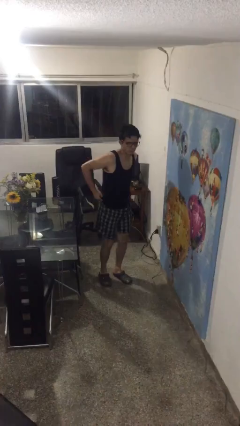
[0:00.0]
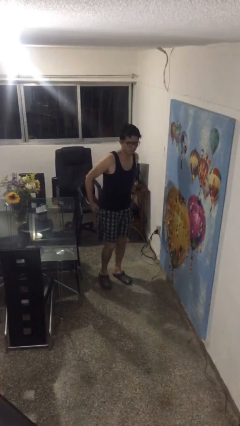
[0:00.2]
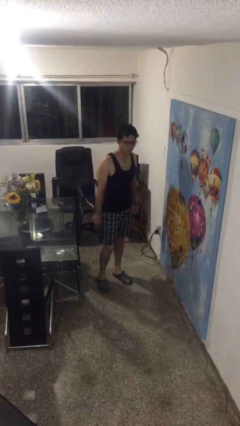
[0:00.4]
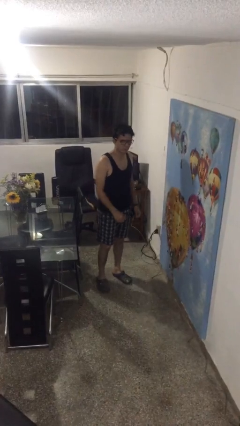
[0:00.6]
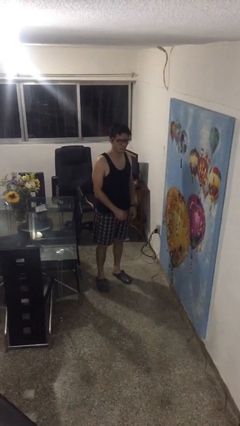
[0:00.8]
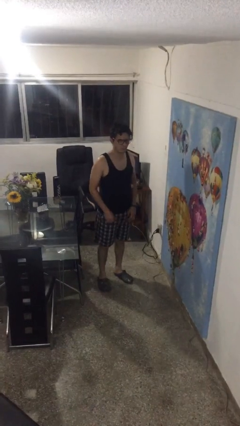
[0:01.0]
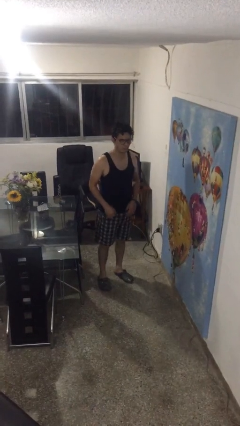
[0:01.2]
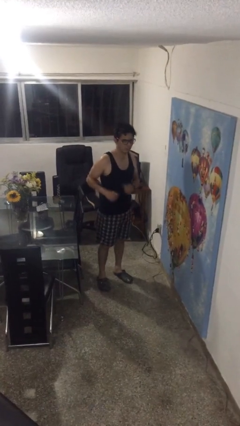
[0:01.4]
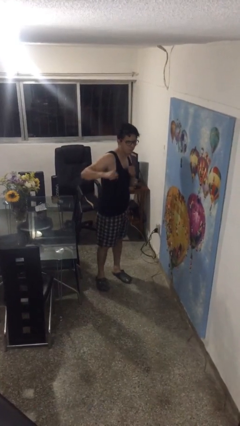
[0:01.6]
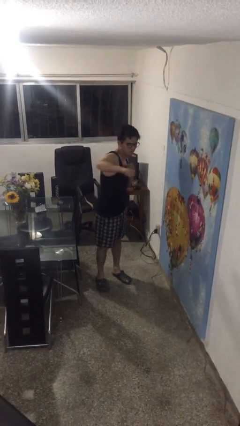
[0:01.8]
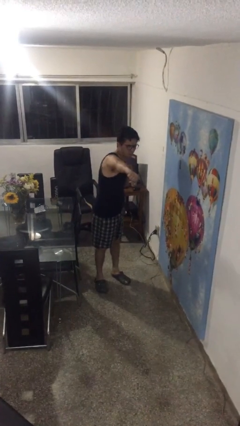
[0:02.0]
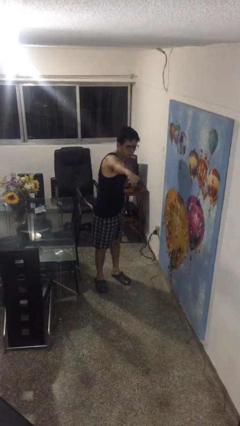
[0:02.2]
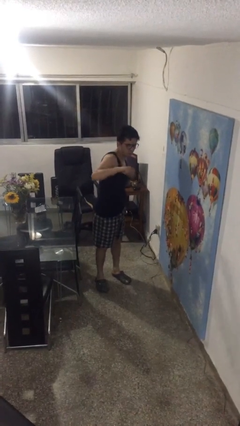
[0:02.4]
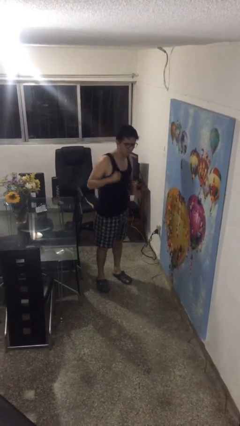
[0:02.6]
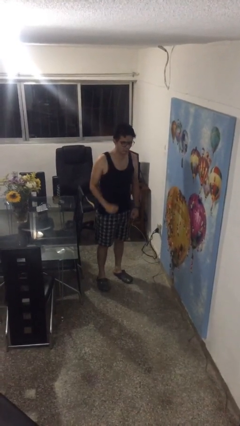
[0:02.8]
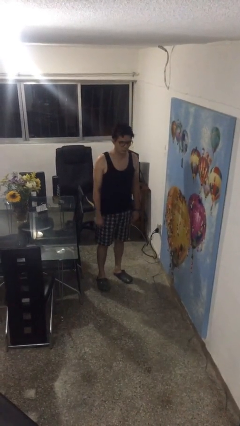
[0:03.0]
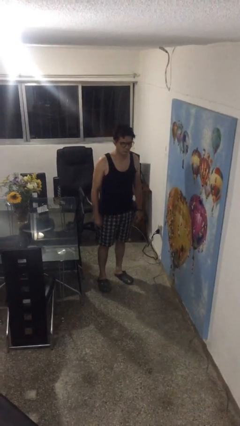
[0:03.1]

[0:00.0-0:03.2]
person karate chop

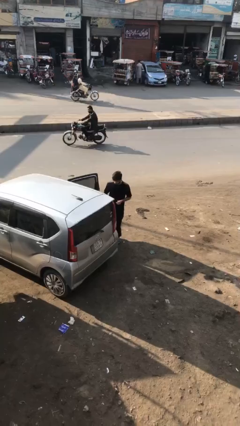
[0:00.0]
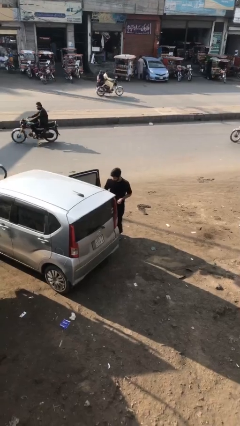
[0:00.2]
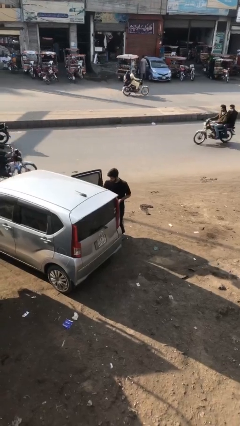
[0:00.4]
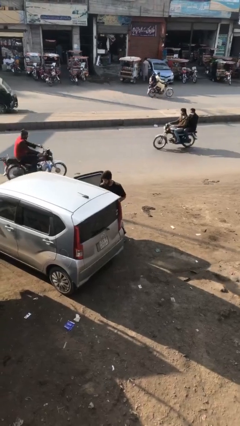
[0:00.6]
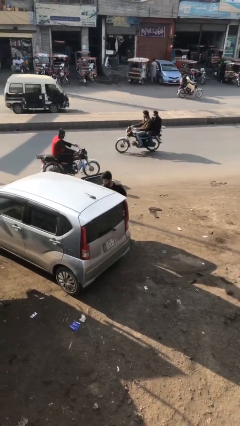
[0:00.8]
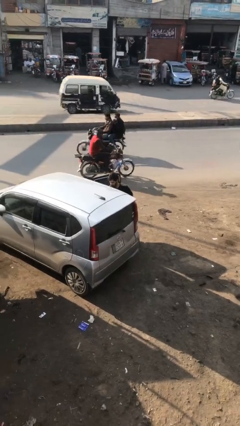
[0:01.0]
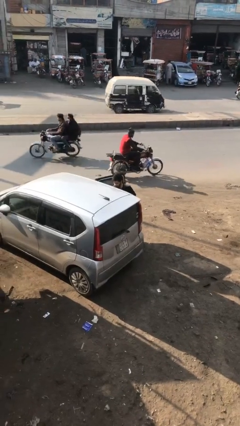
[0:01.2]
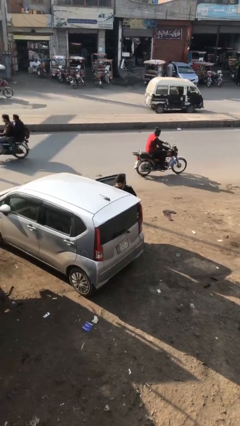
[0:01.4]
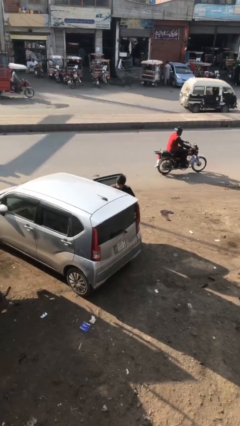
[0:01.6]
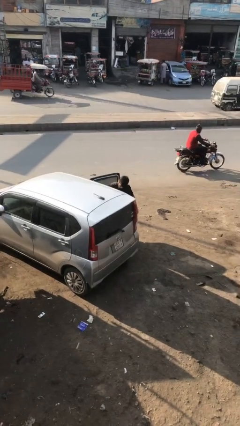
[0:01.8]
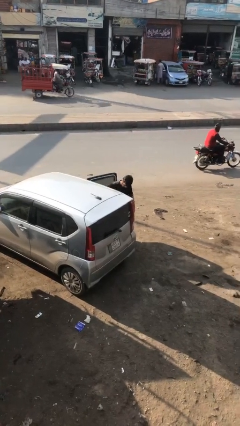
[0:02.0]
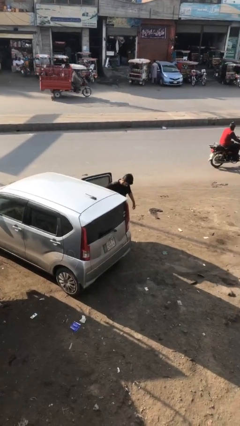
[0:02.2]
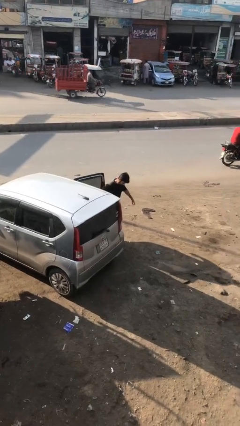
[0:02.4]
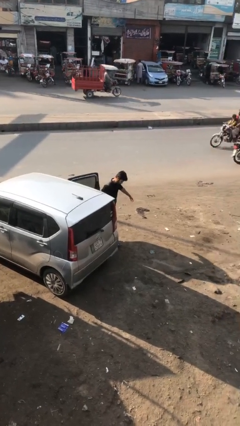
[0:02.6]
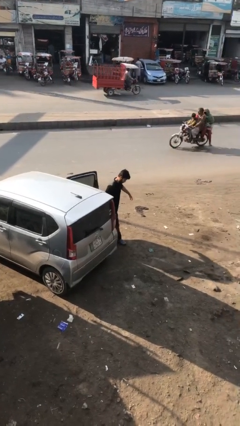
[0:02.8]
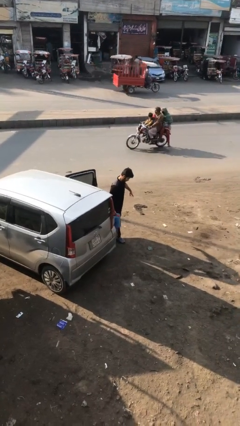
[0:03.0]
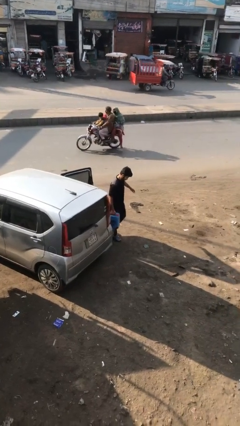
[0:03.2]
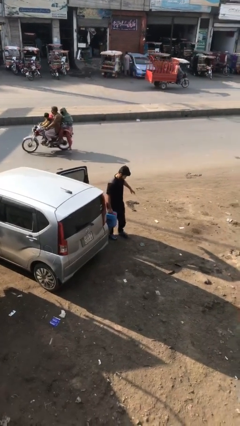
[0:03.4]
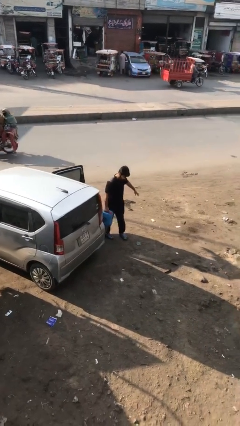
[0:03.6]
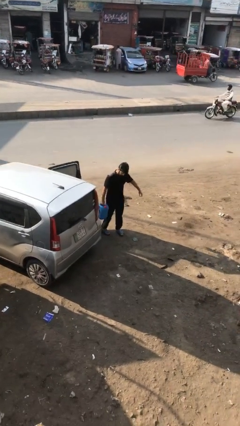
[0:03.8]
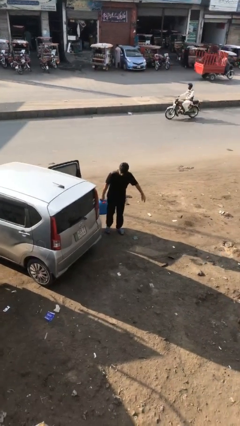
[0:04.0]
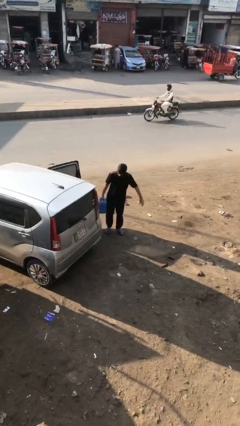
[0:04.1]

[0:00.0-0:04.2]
person unloads car

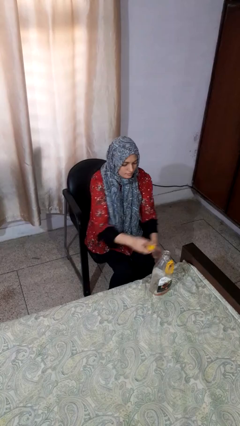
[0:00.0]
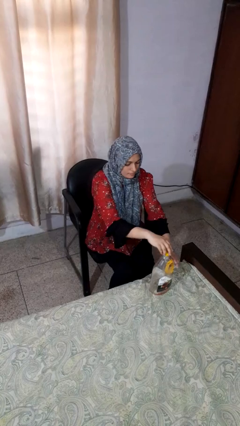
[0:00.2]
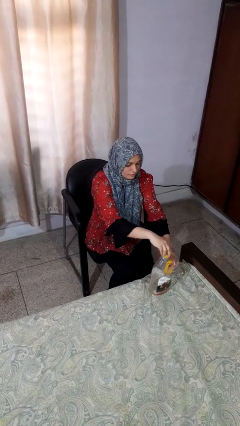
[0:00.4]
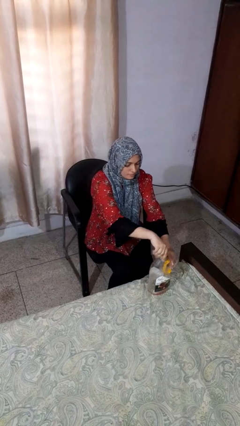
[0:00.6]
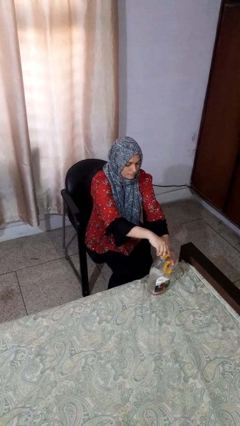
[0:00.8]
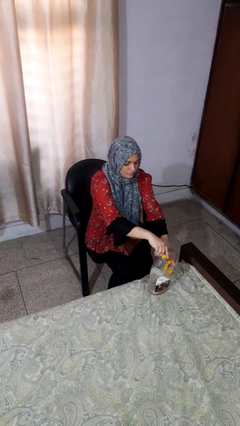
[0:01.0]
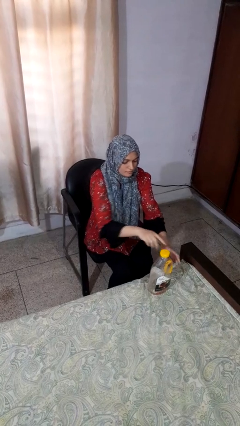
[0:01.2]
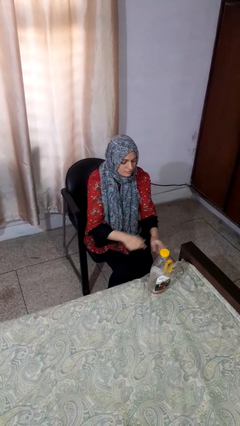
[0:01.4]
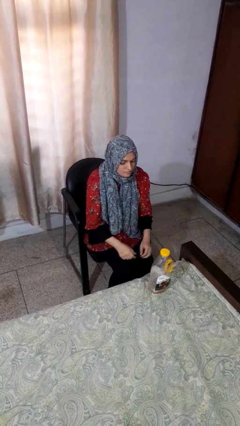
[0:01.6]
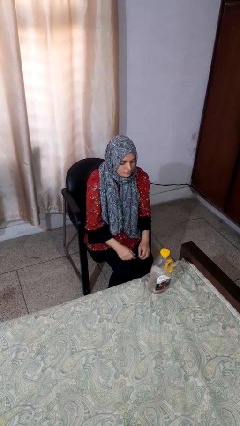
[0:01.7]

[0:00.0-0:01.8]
person screws lid to bottle

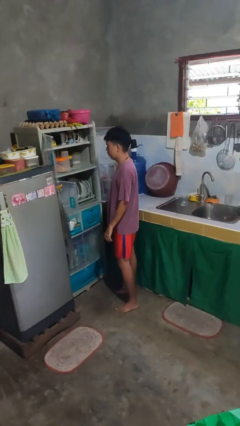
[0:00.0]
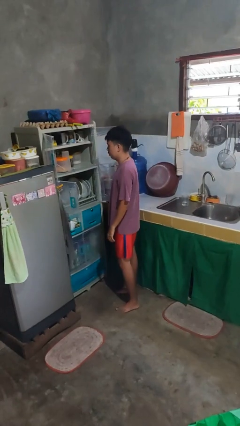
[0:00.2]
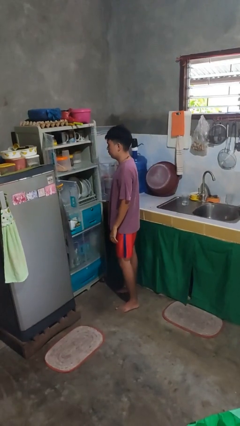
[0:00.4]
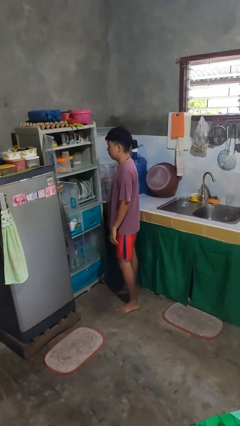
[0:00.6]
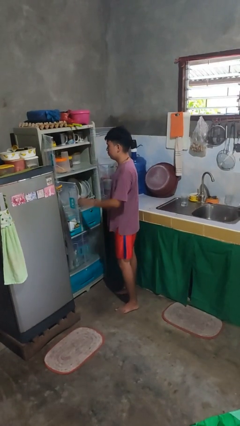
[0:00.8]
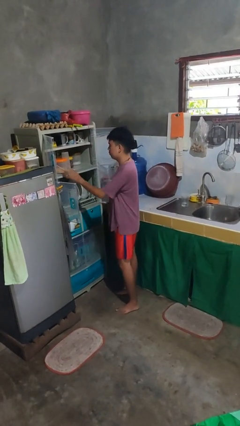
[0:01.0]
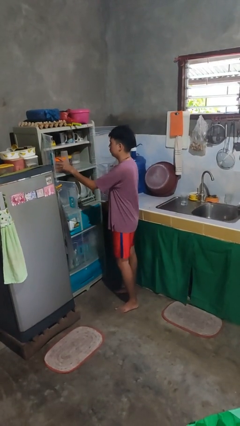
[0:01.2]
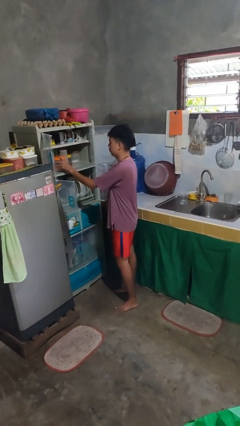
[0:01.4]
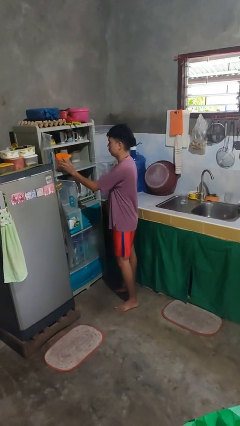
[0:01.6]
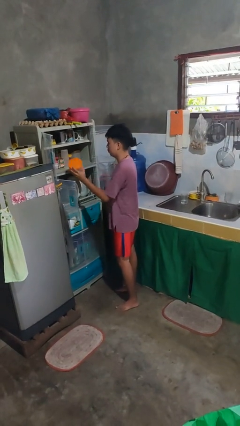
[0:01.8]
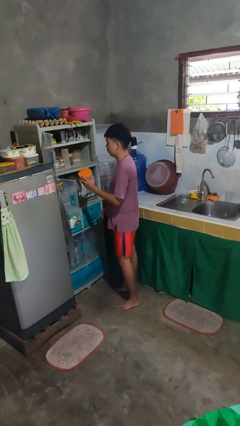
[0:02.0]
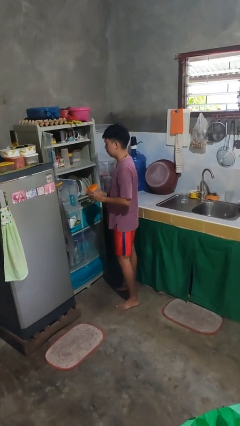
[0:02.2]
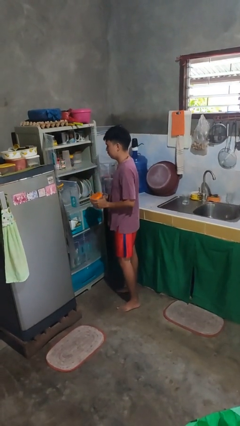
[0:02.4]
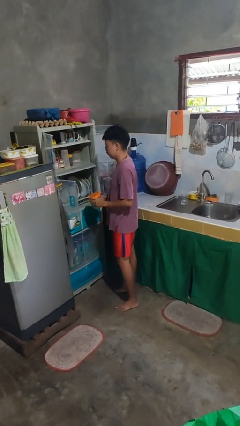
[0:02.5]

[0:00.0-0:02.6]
person takes object from cabinet

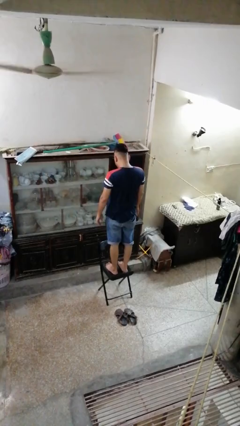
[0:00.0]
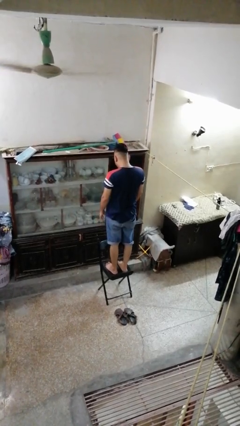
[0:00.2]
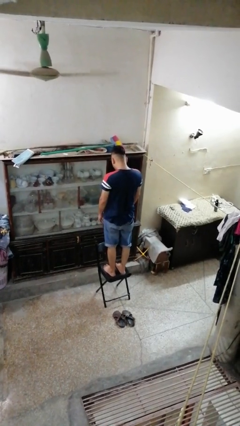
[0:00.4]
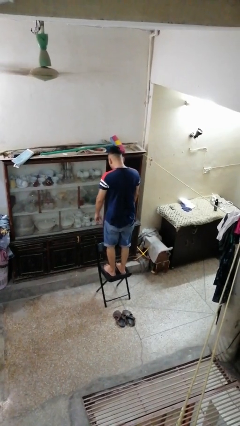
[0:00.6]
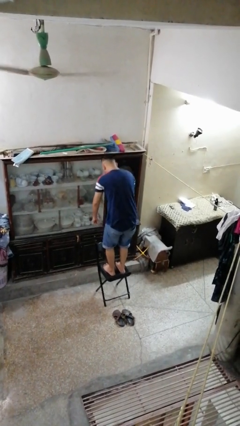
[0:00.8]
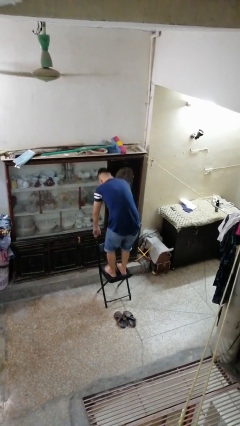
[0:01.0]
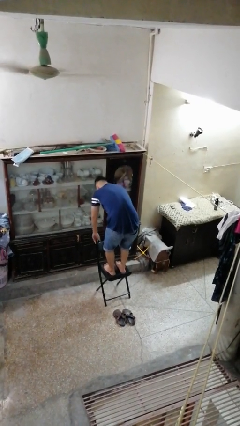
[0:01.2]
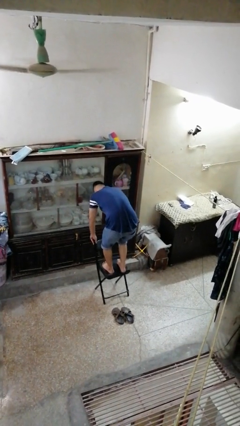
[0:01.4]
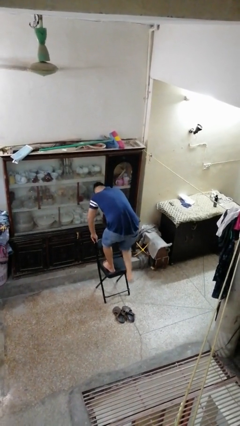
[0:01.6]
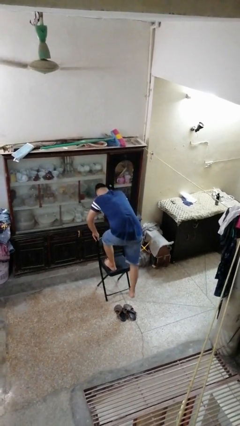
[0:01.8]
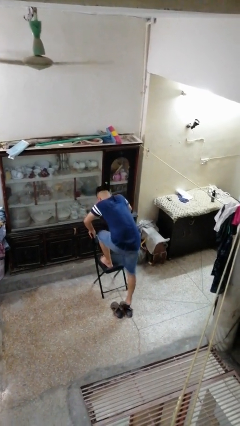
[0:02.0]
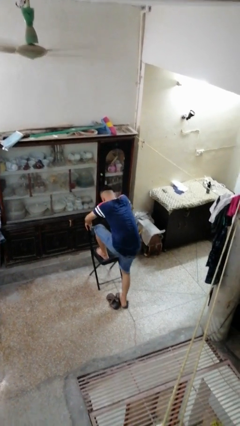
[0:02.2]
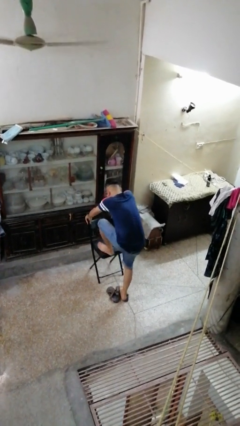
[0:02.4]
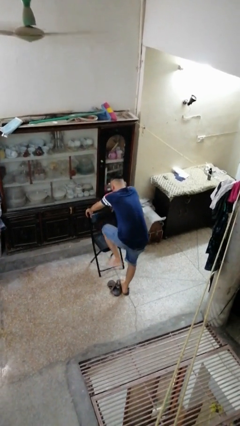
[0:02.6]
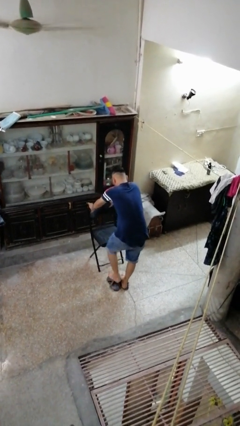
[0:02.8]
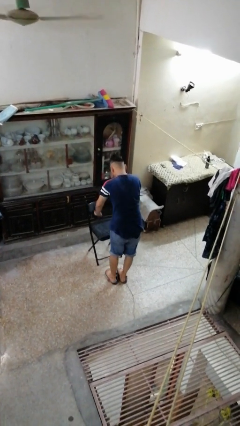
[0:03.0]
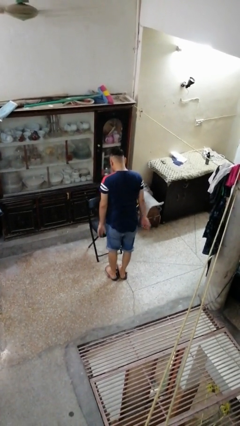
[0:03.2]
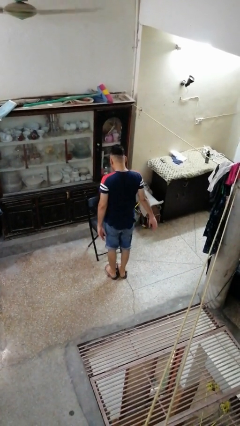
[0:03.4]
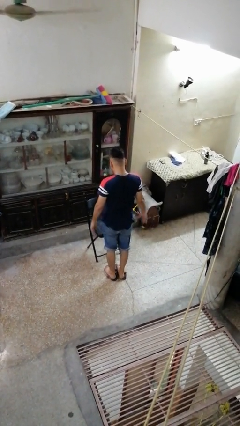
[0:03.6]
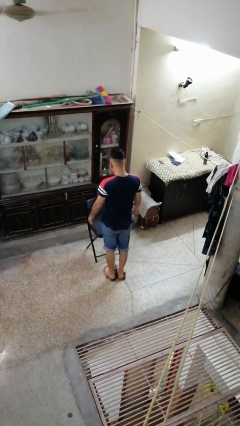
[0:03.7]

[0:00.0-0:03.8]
person climbs off chair

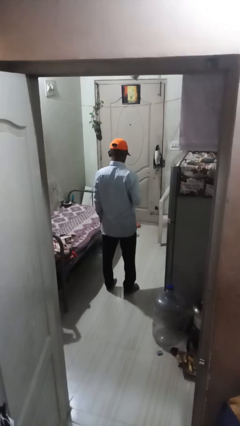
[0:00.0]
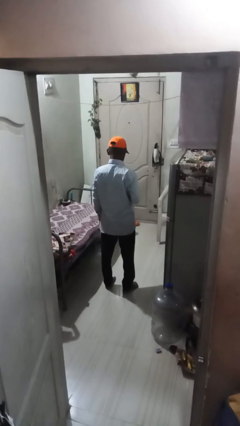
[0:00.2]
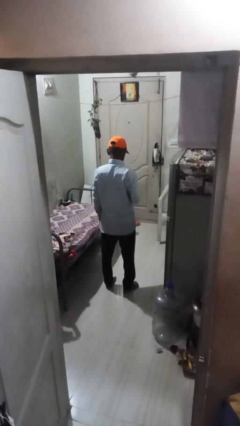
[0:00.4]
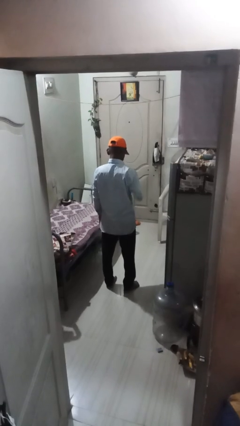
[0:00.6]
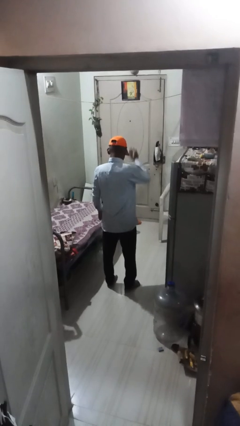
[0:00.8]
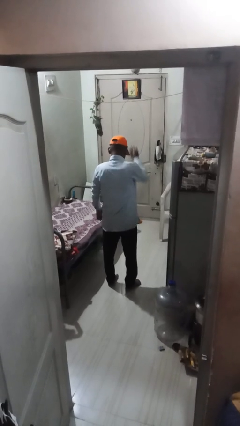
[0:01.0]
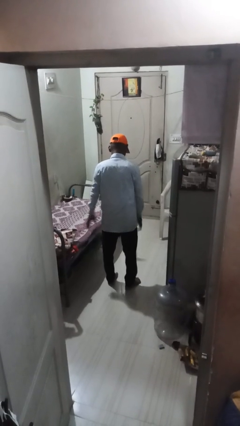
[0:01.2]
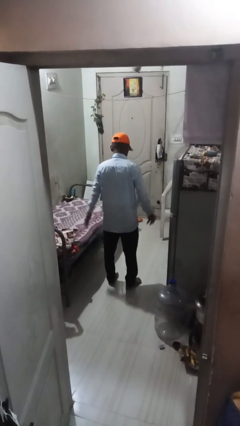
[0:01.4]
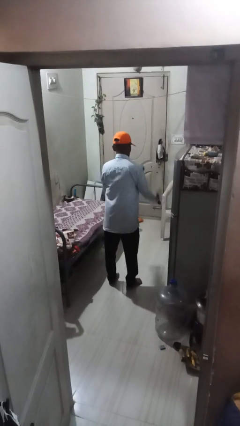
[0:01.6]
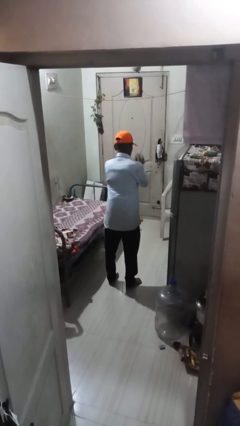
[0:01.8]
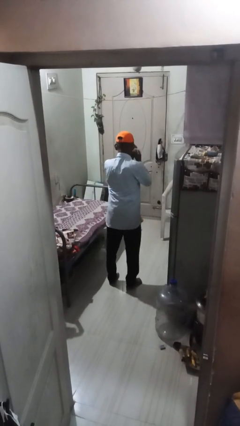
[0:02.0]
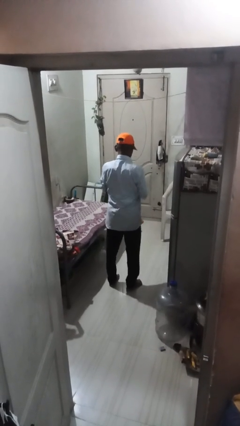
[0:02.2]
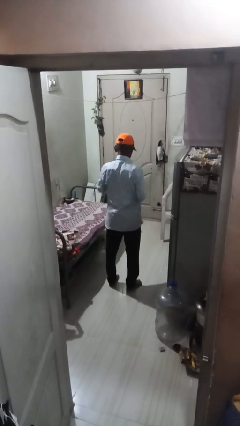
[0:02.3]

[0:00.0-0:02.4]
person bounces ball on floor
